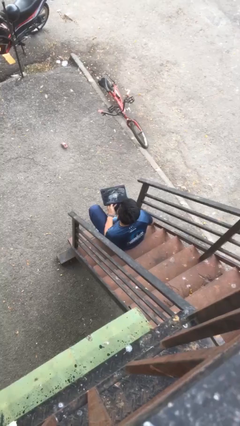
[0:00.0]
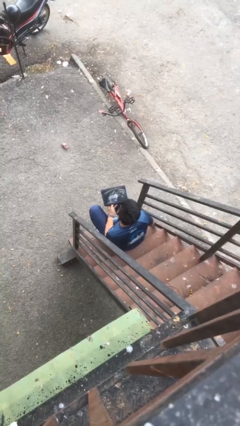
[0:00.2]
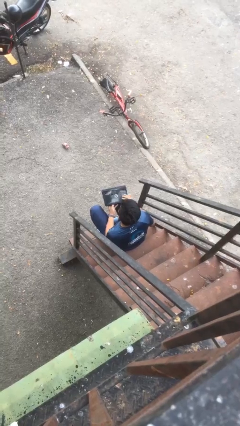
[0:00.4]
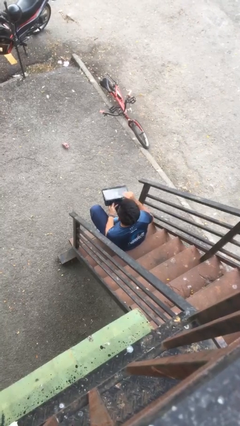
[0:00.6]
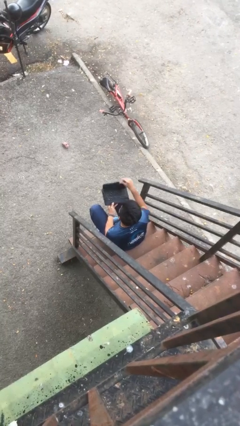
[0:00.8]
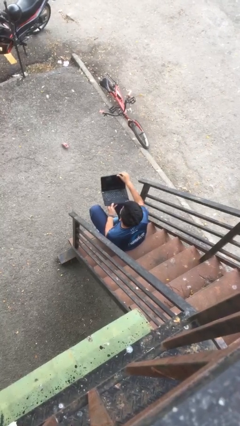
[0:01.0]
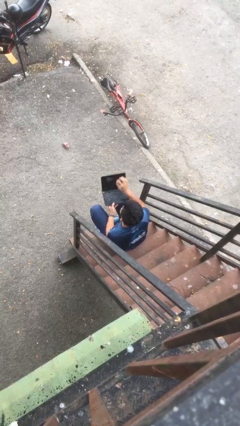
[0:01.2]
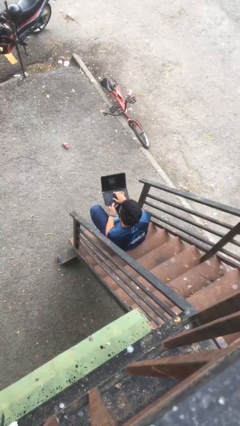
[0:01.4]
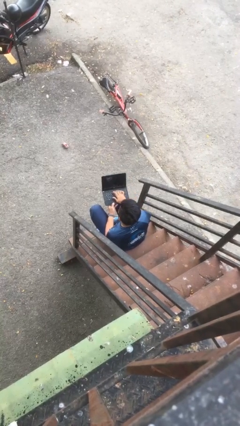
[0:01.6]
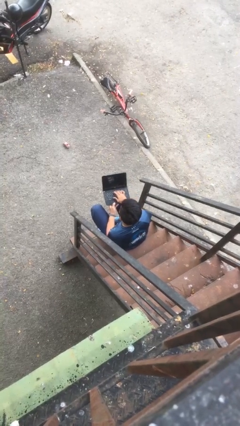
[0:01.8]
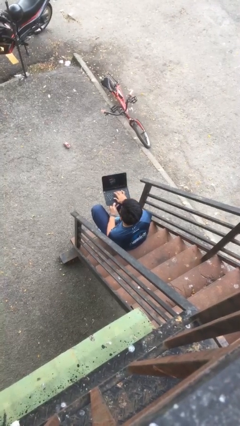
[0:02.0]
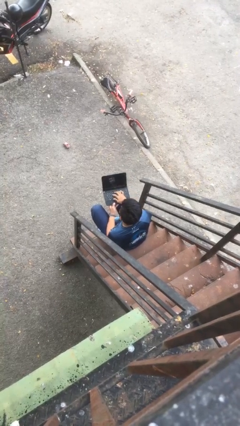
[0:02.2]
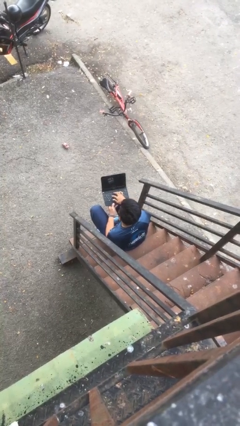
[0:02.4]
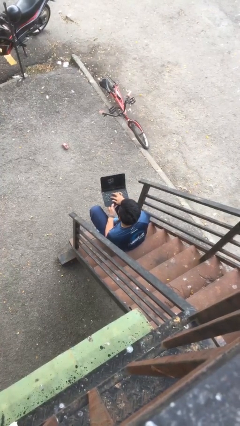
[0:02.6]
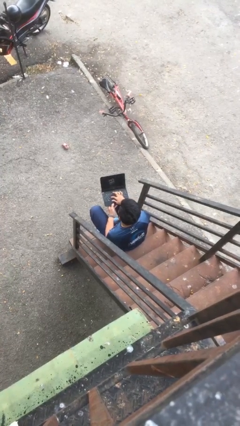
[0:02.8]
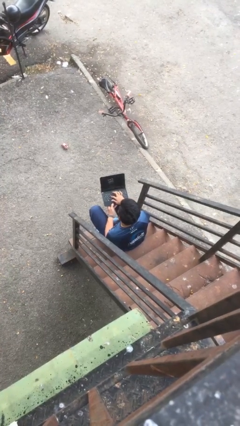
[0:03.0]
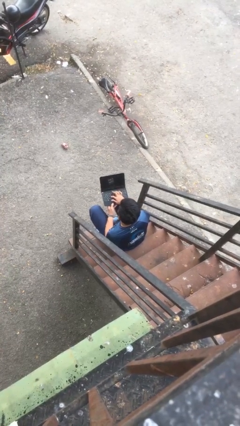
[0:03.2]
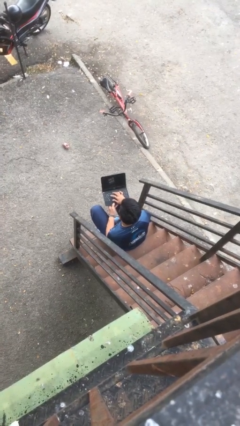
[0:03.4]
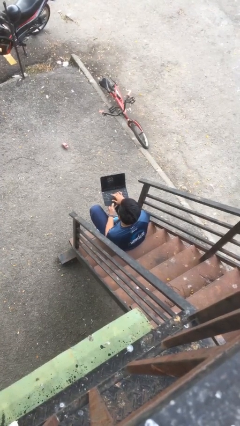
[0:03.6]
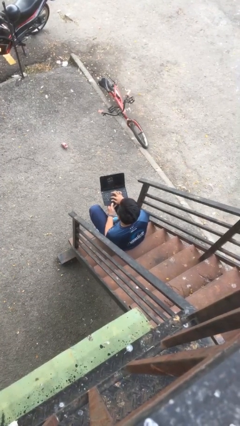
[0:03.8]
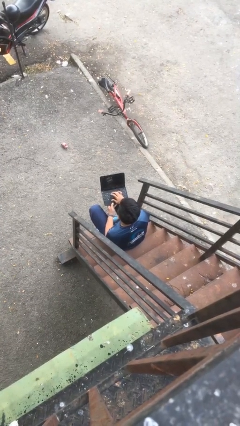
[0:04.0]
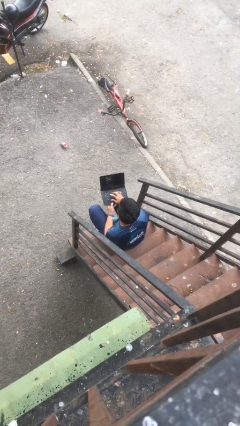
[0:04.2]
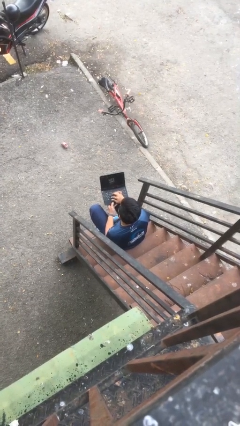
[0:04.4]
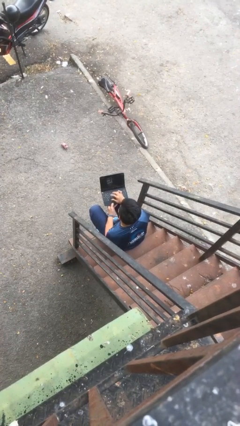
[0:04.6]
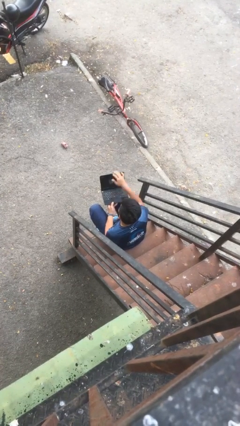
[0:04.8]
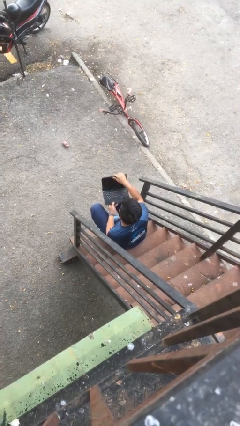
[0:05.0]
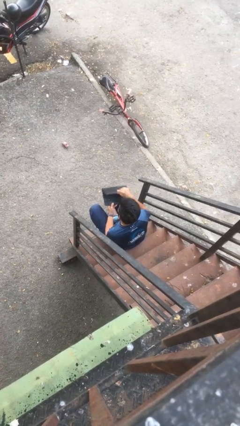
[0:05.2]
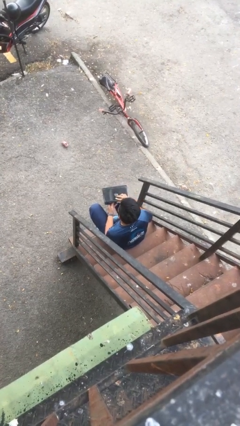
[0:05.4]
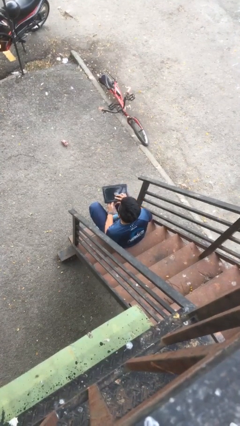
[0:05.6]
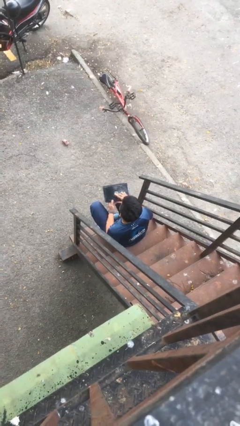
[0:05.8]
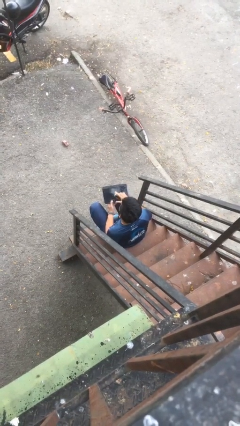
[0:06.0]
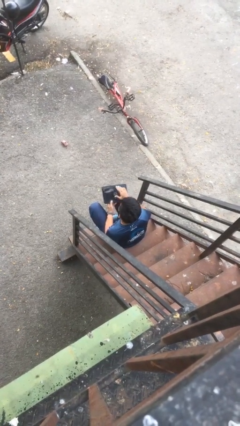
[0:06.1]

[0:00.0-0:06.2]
person interacts with laptop

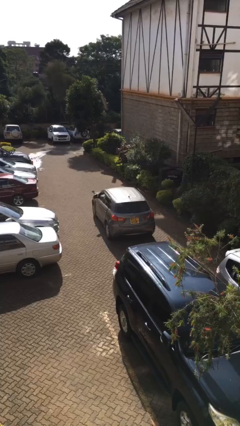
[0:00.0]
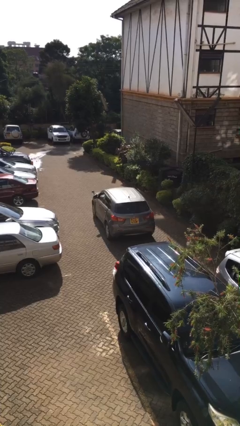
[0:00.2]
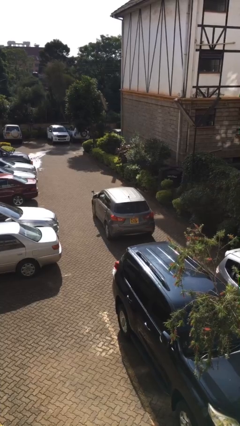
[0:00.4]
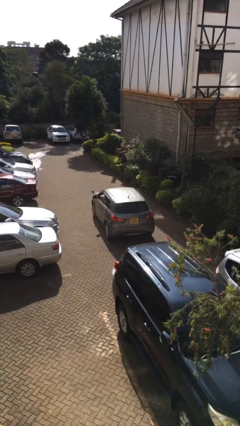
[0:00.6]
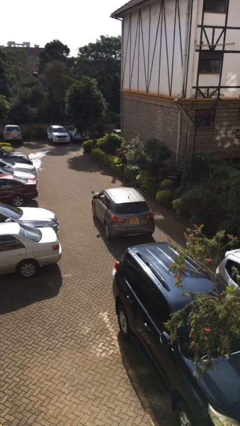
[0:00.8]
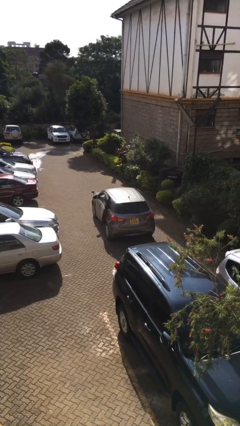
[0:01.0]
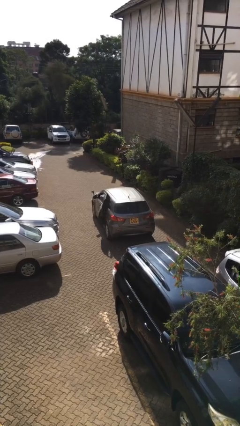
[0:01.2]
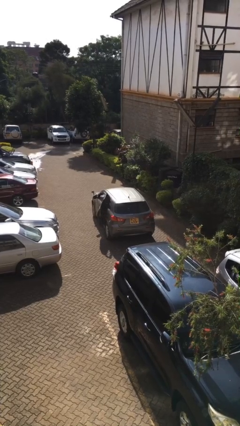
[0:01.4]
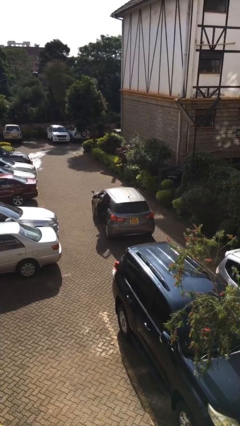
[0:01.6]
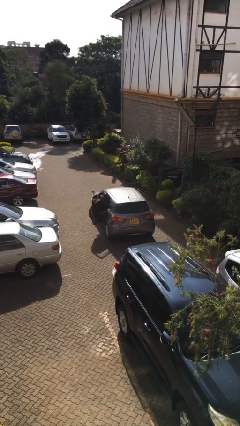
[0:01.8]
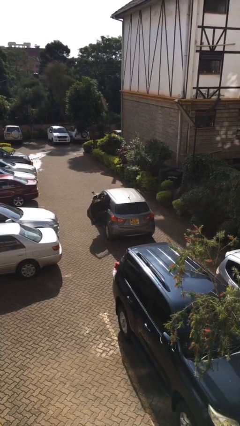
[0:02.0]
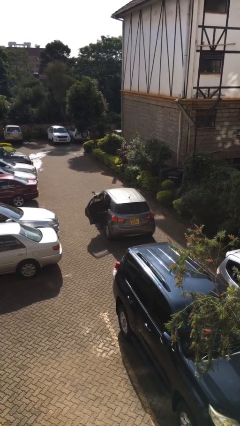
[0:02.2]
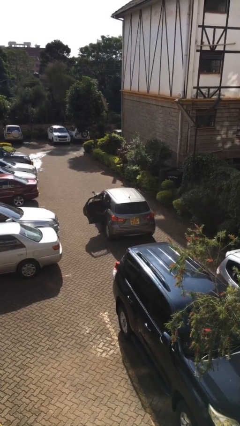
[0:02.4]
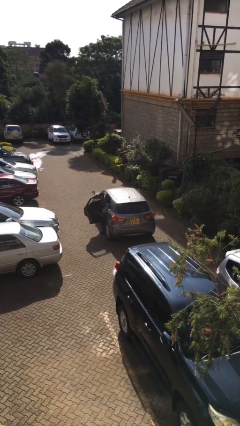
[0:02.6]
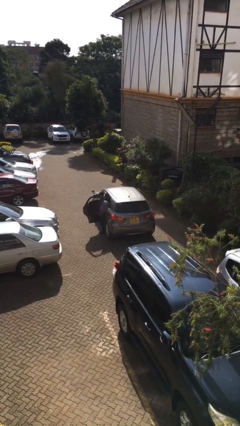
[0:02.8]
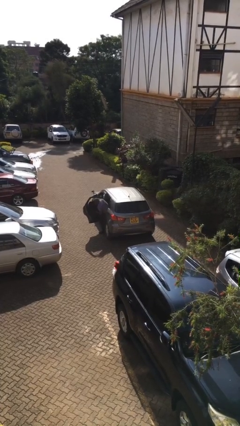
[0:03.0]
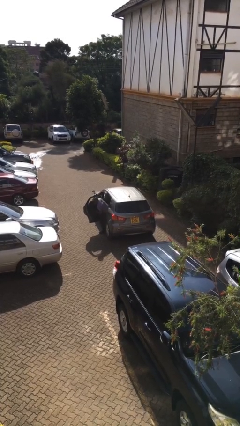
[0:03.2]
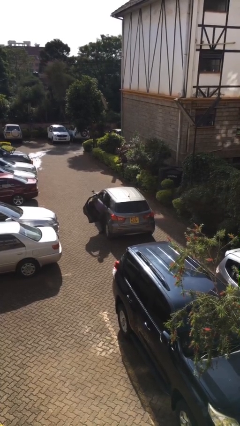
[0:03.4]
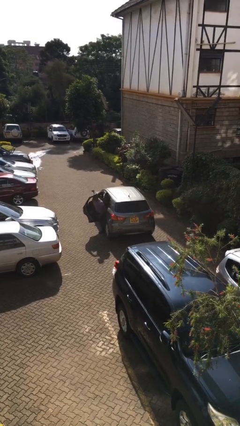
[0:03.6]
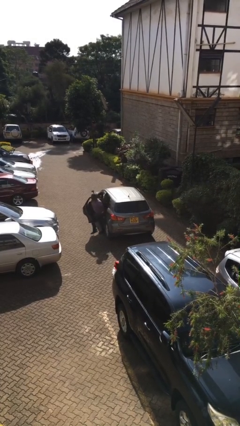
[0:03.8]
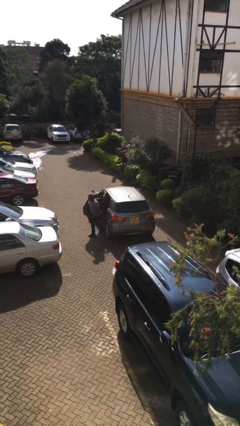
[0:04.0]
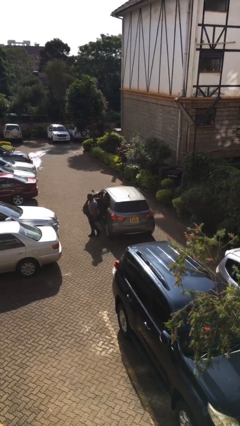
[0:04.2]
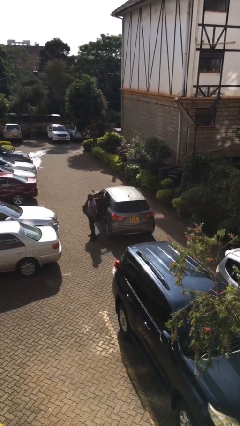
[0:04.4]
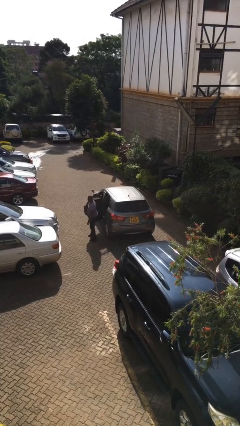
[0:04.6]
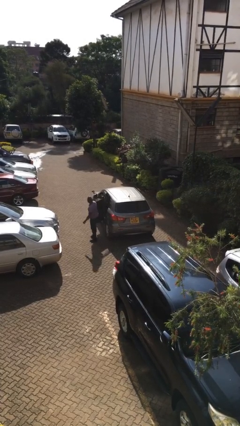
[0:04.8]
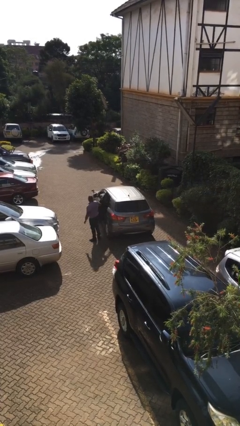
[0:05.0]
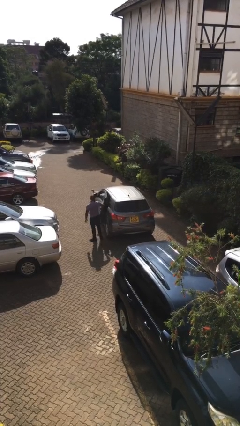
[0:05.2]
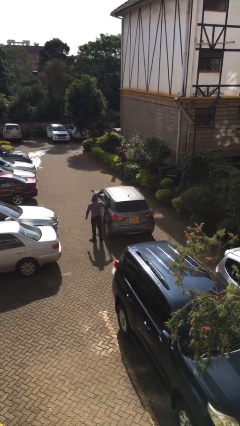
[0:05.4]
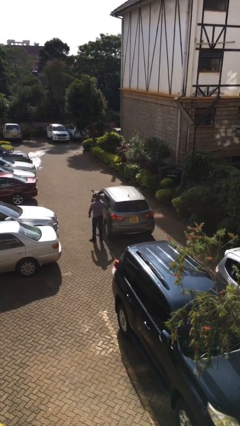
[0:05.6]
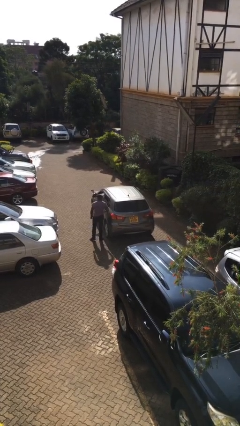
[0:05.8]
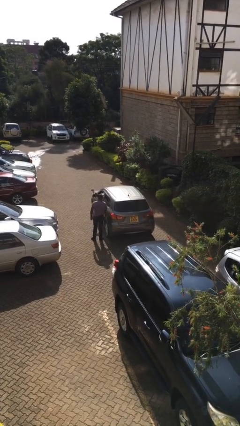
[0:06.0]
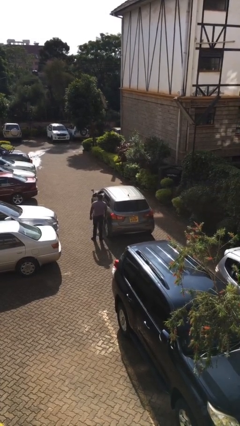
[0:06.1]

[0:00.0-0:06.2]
car drops off person

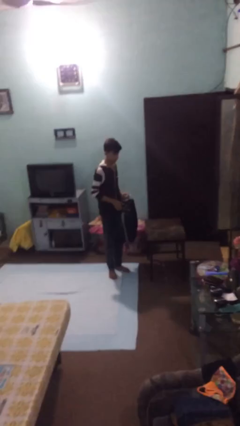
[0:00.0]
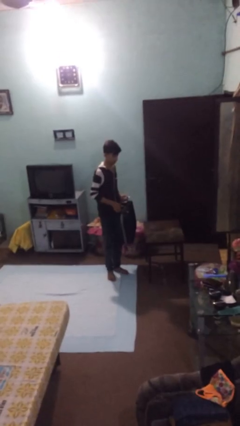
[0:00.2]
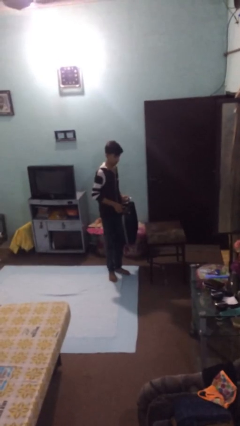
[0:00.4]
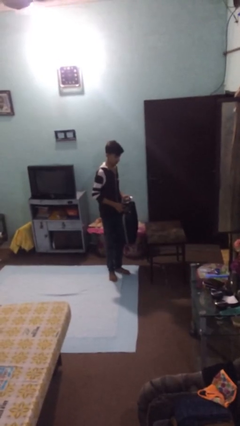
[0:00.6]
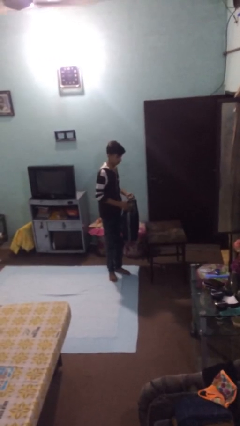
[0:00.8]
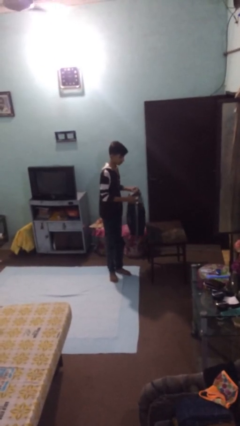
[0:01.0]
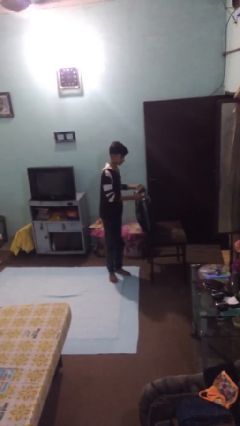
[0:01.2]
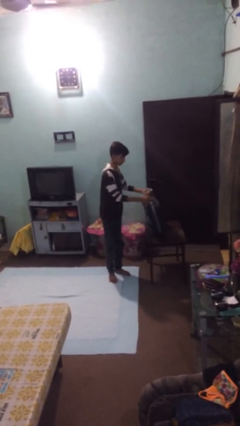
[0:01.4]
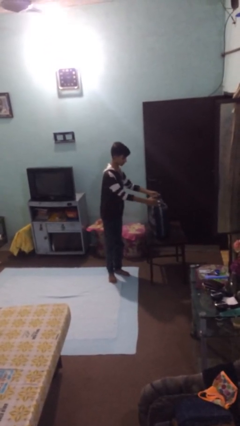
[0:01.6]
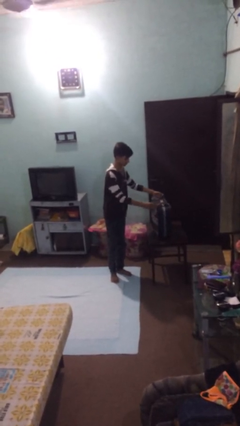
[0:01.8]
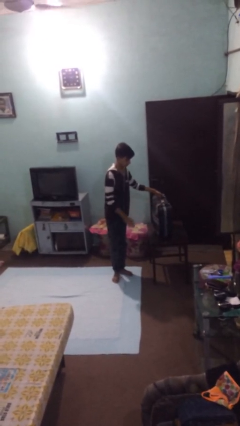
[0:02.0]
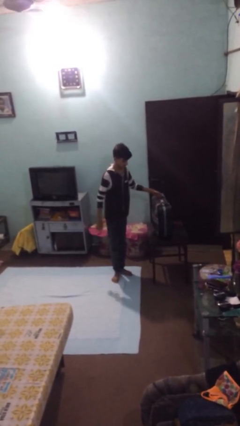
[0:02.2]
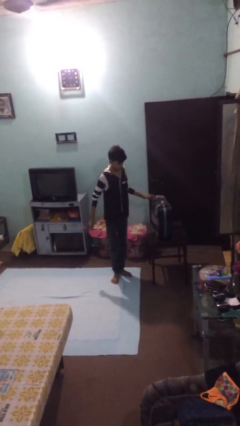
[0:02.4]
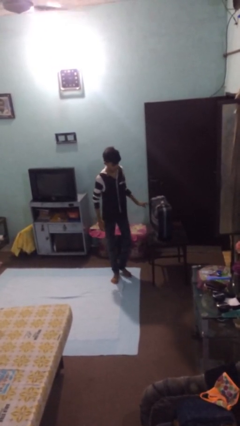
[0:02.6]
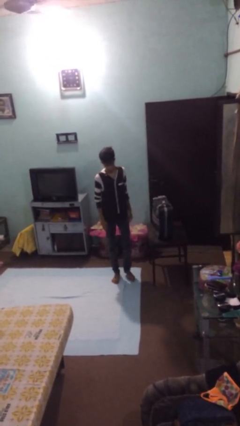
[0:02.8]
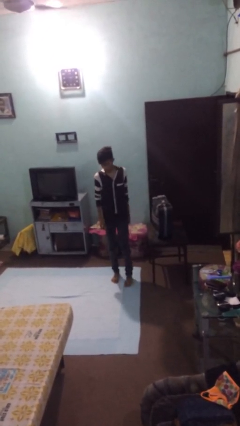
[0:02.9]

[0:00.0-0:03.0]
person puts down object on table

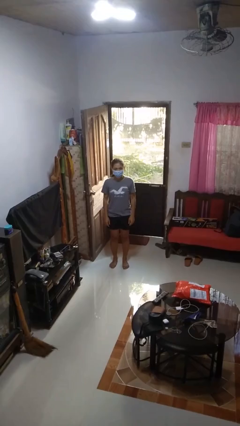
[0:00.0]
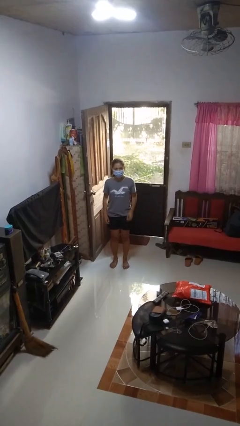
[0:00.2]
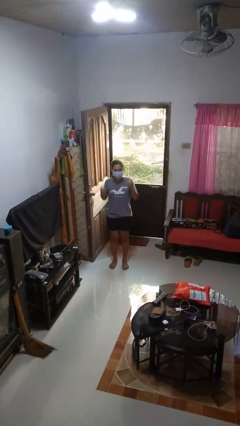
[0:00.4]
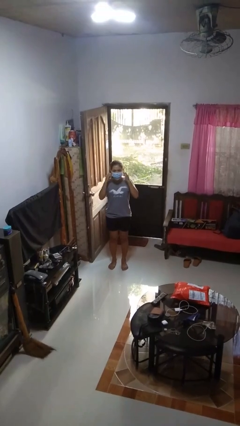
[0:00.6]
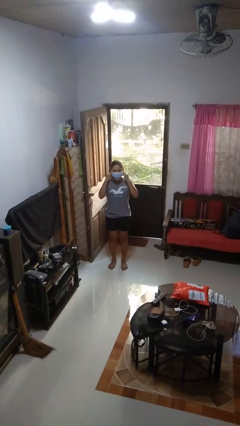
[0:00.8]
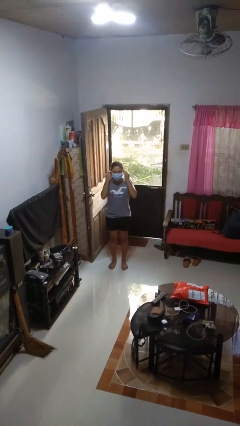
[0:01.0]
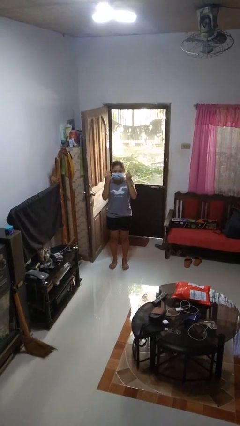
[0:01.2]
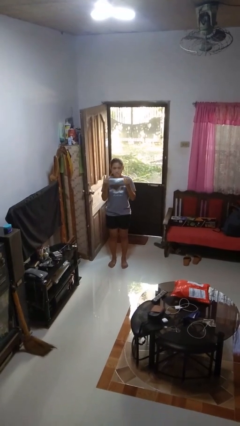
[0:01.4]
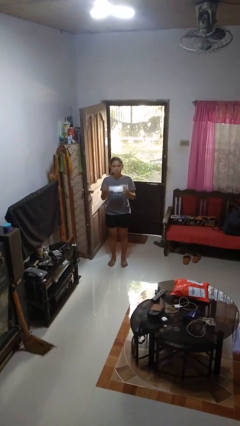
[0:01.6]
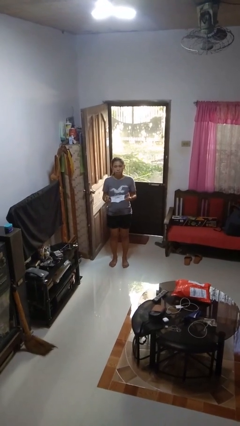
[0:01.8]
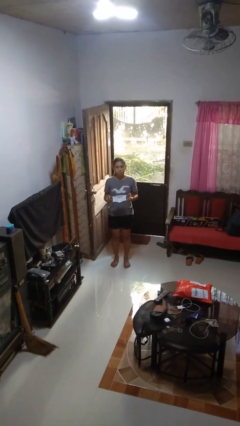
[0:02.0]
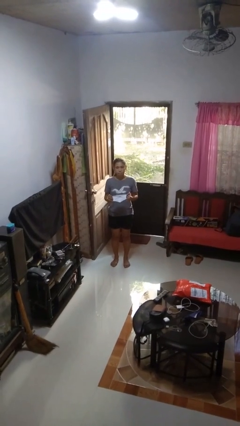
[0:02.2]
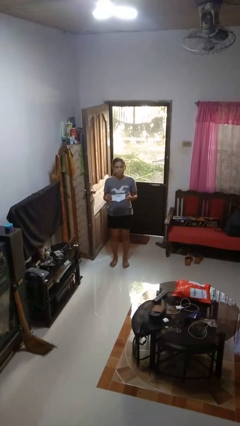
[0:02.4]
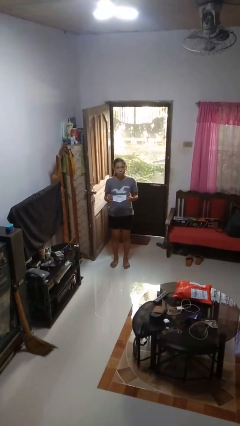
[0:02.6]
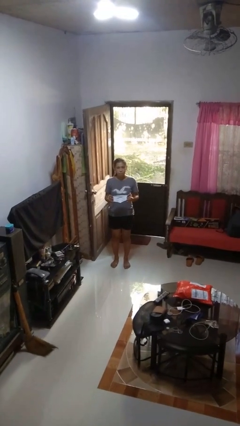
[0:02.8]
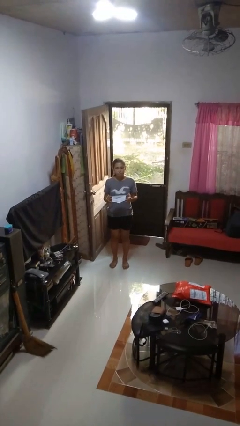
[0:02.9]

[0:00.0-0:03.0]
person takes off facemask
